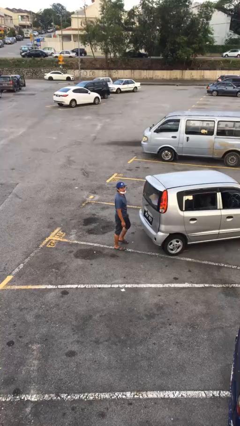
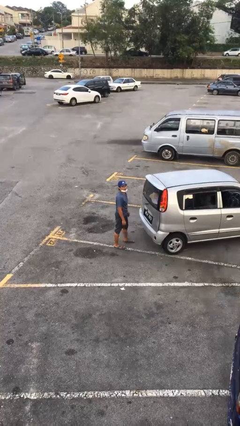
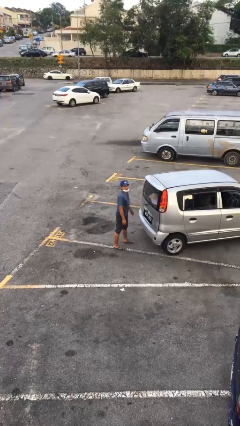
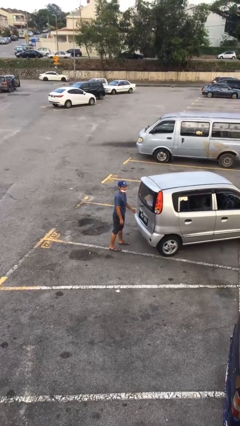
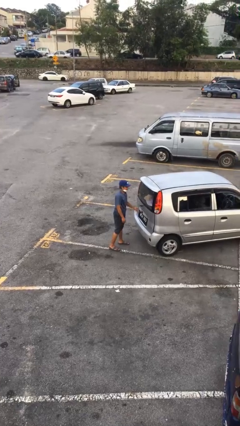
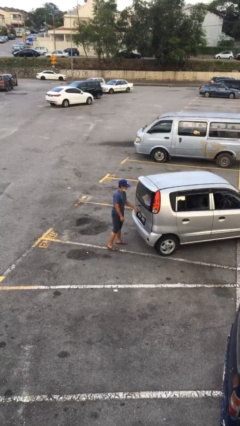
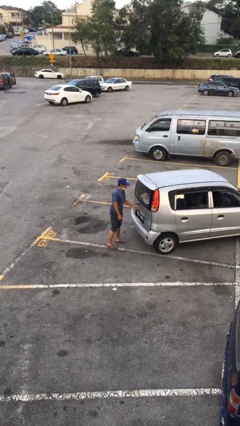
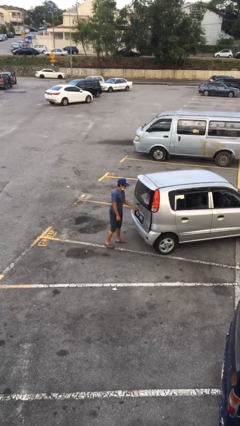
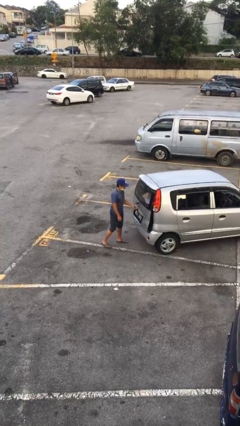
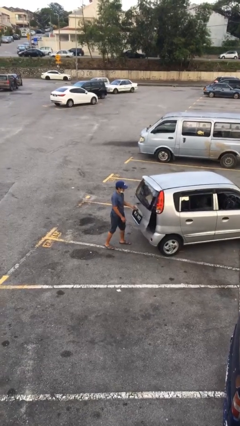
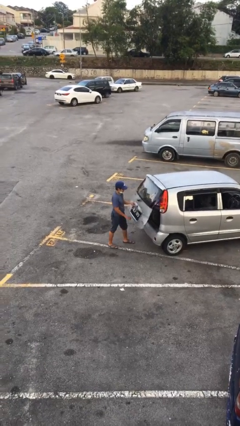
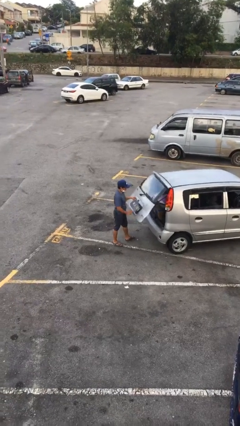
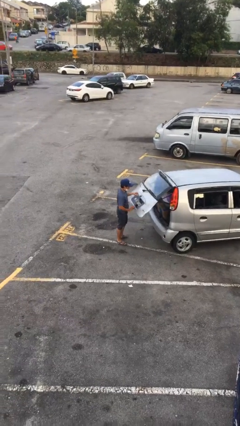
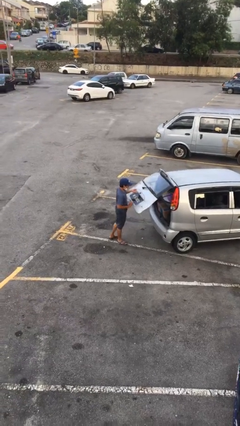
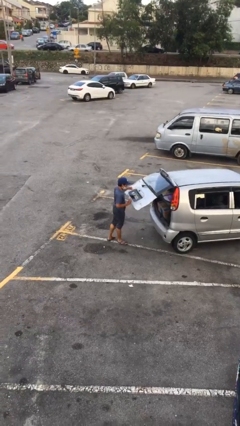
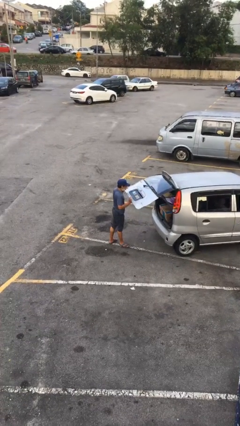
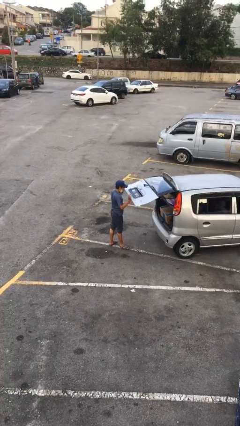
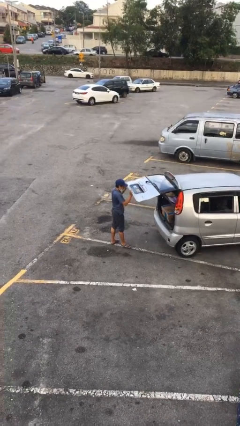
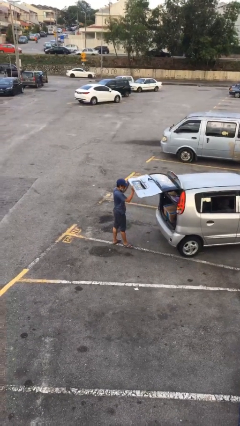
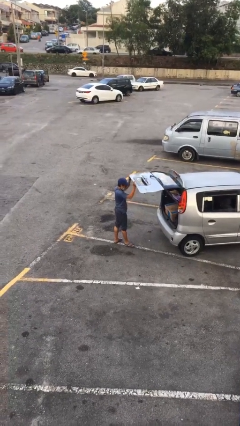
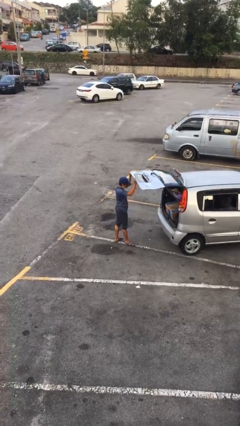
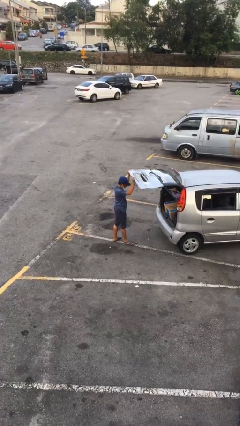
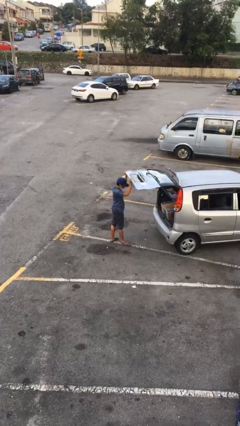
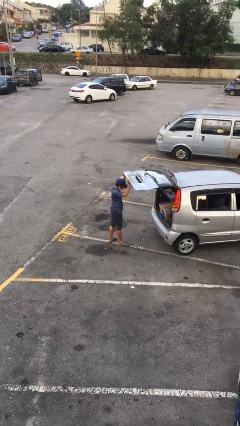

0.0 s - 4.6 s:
person opens car trunk

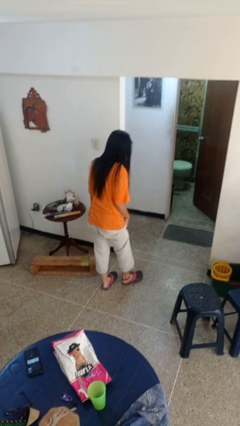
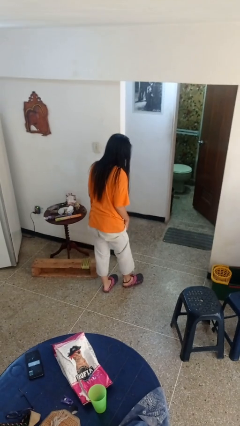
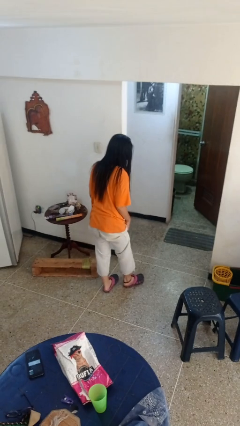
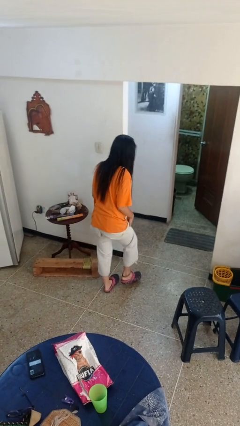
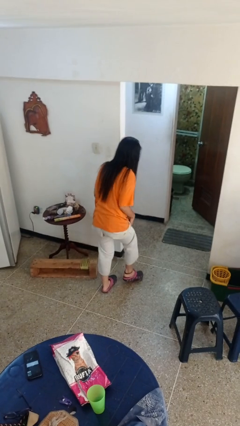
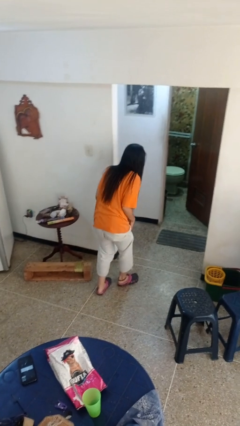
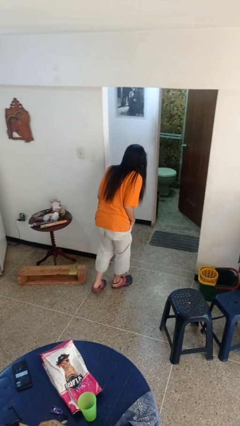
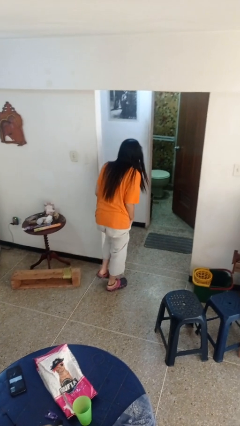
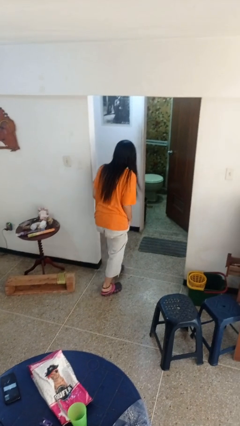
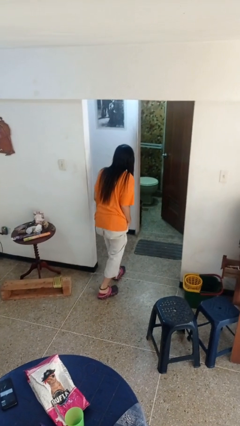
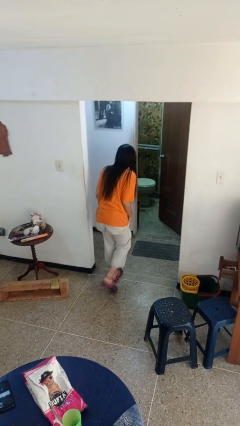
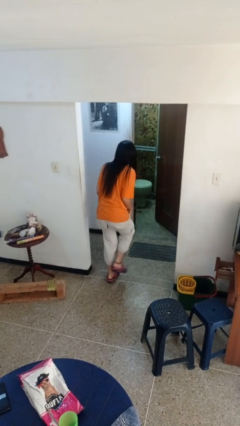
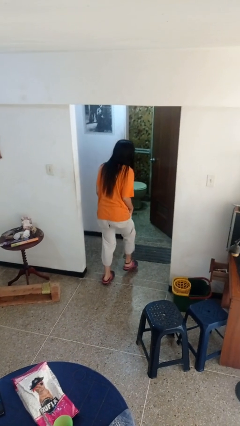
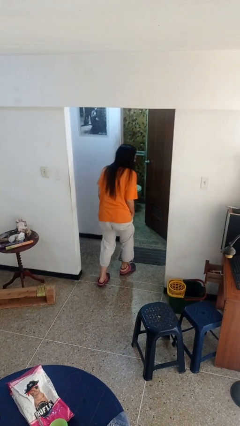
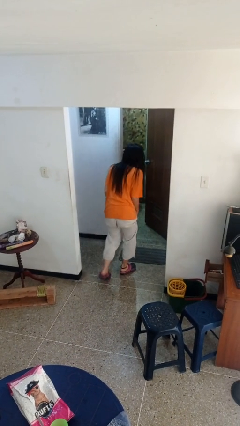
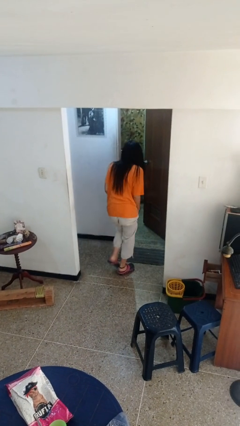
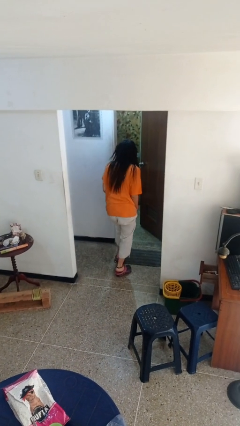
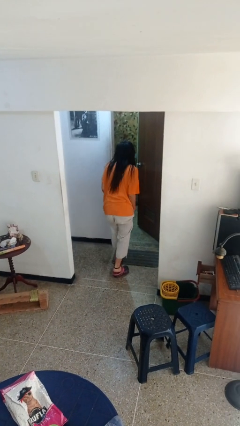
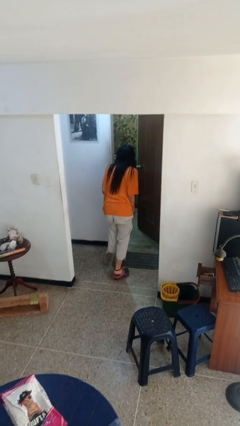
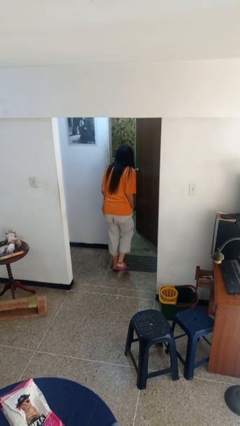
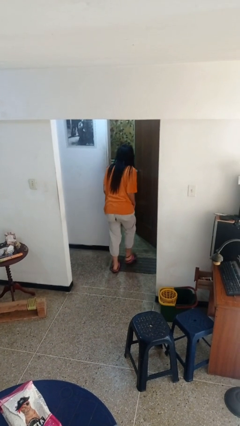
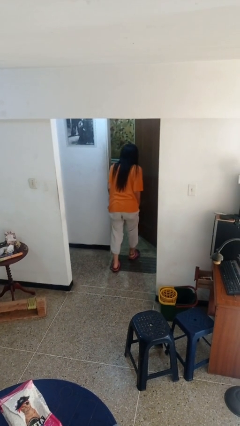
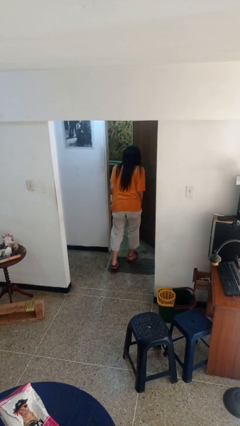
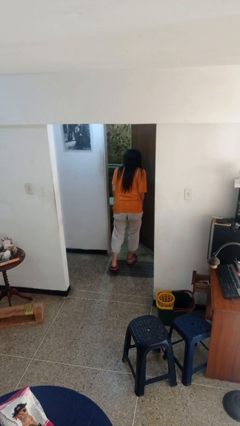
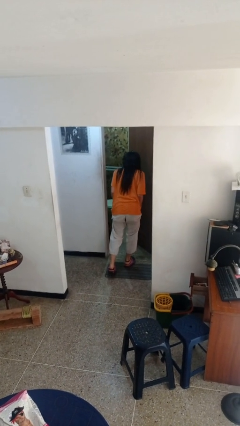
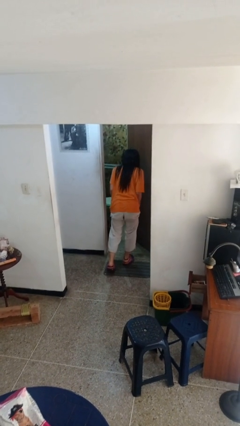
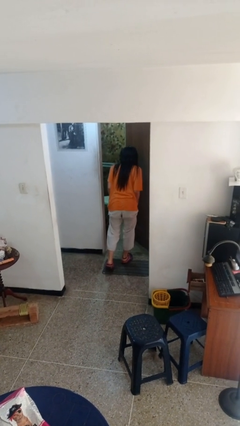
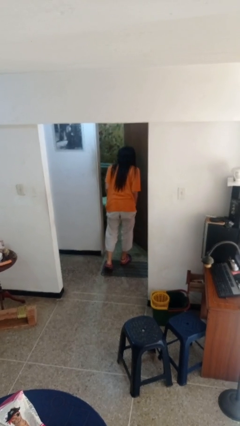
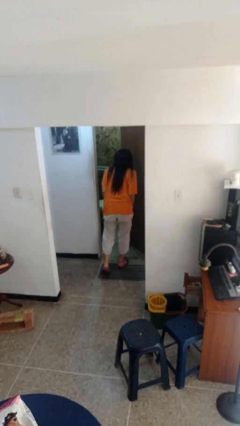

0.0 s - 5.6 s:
person walks tiptoe

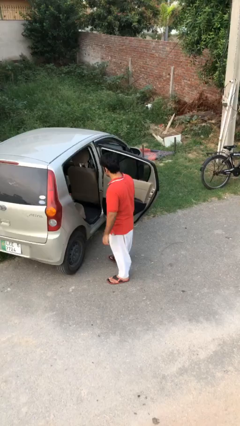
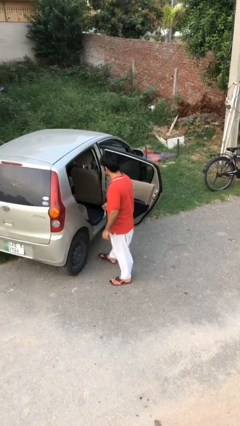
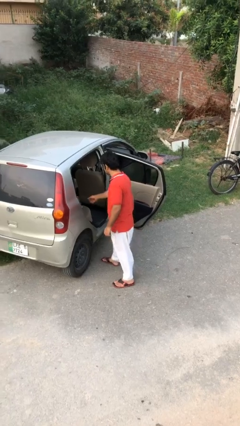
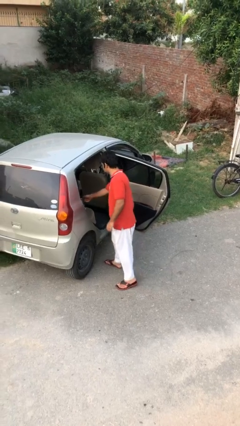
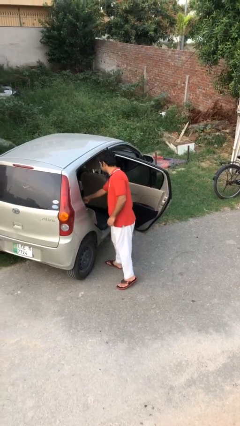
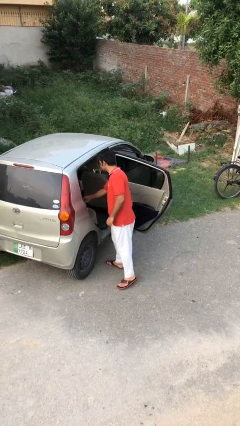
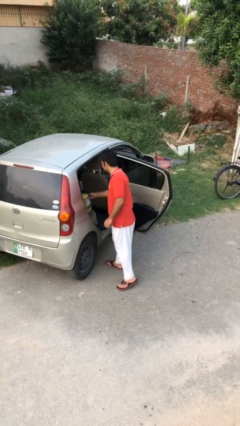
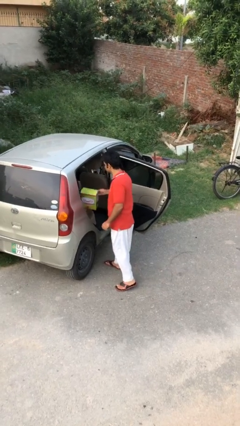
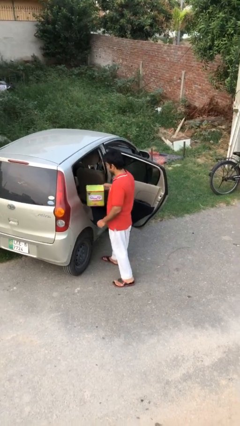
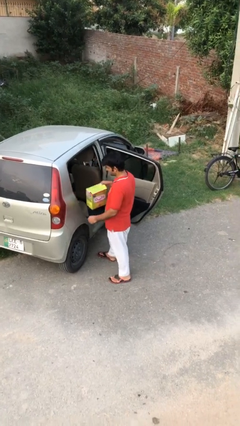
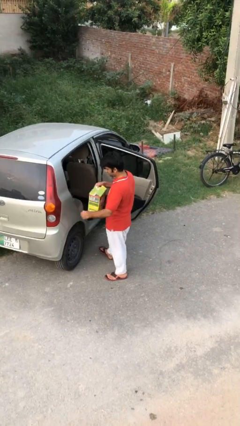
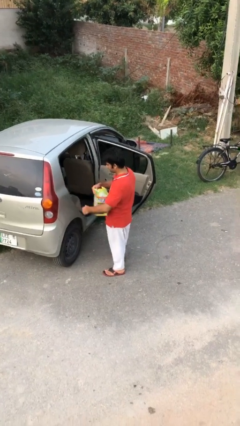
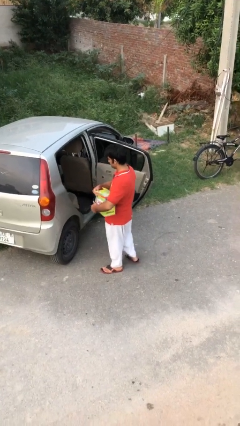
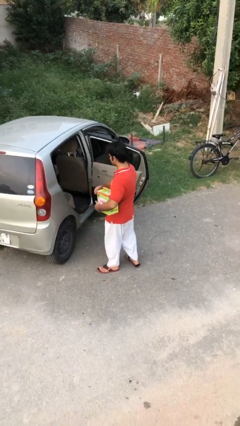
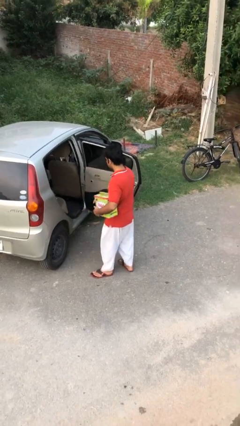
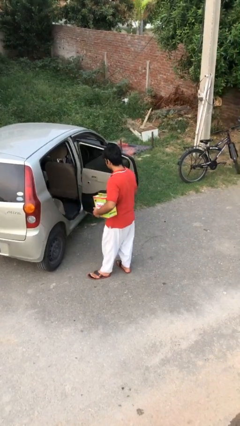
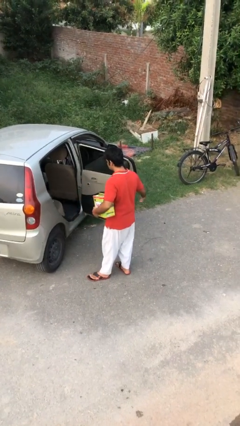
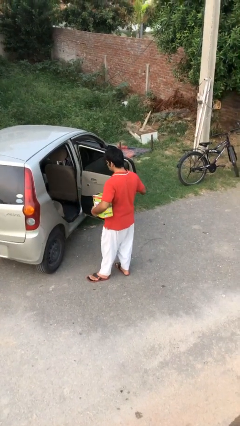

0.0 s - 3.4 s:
person unloads car

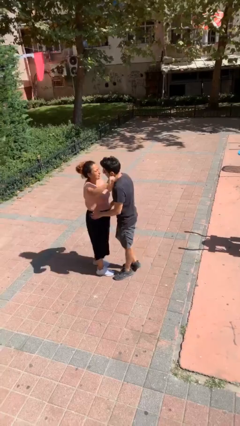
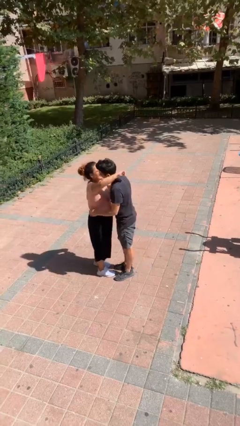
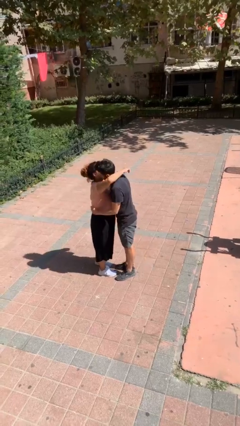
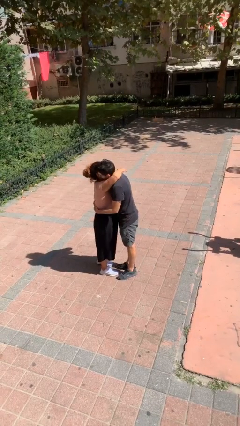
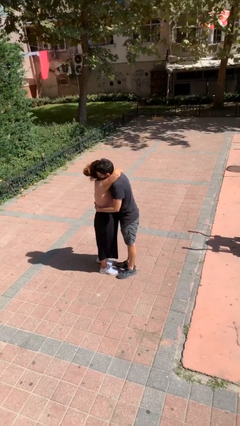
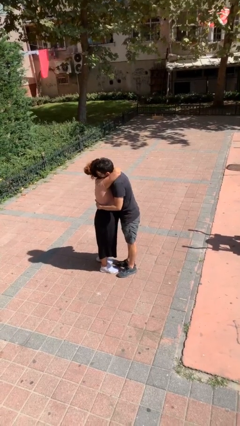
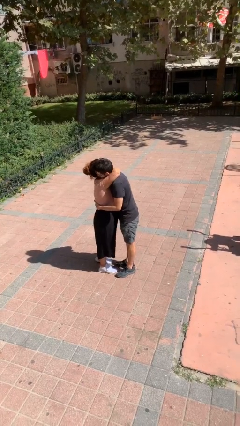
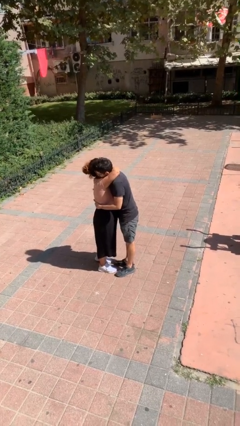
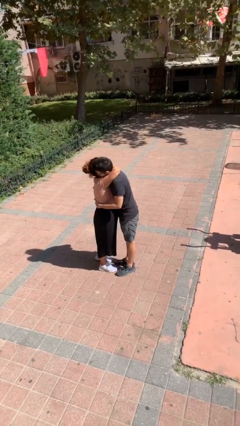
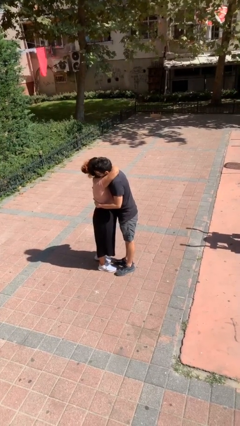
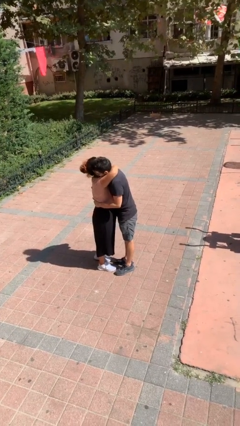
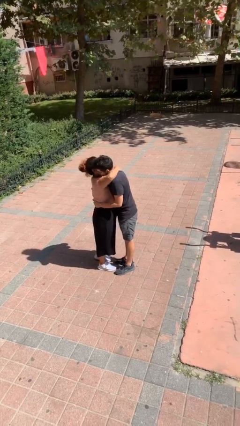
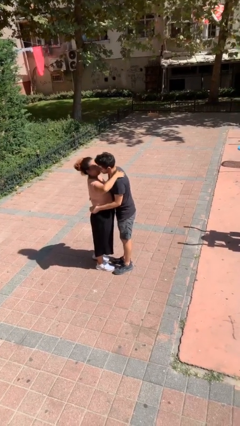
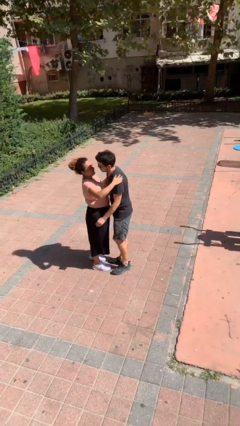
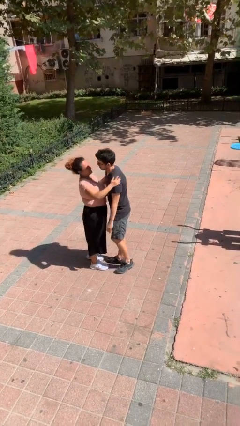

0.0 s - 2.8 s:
person embraces person

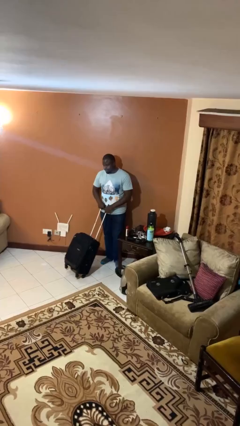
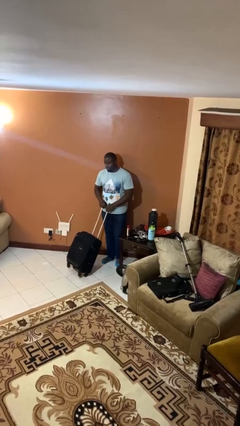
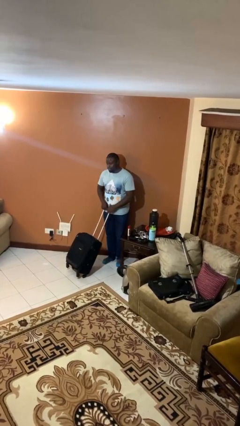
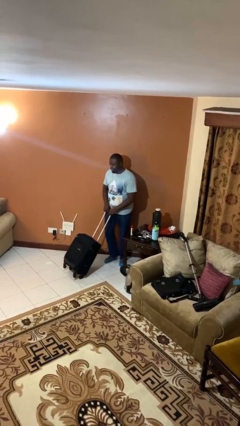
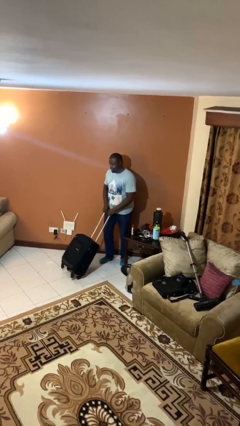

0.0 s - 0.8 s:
person pushes wheeled cart

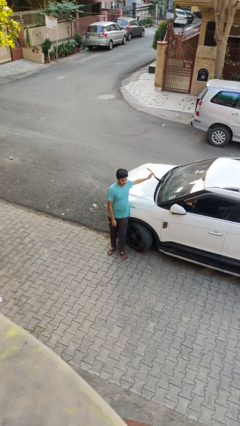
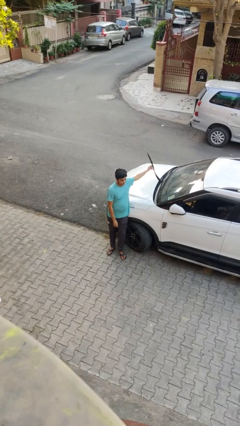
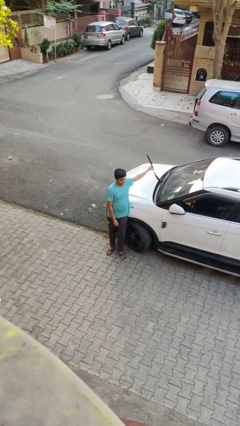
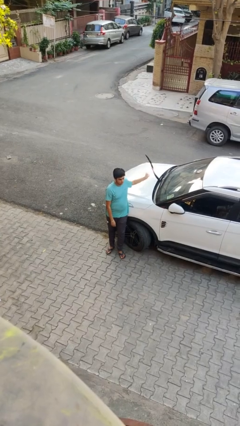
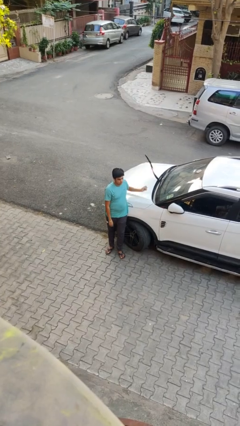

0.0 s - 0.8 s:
person flips up car wipers
